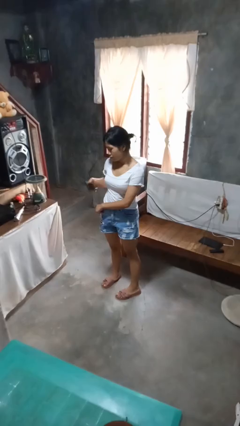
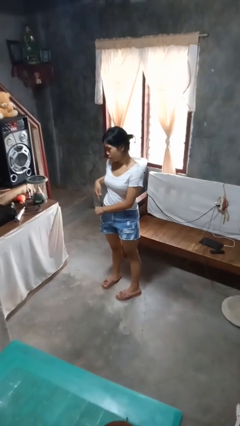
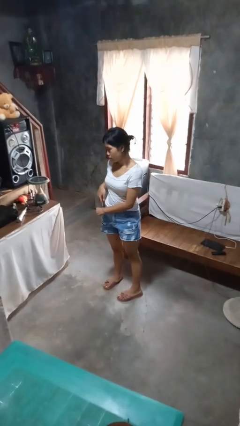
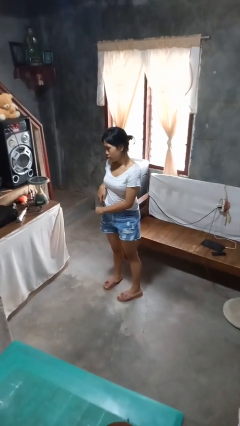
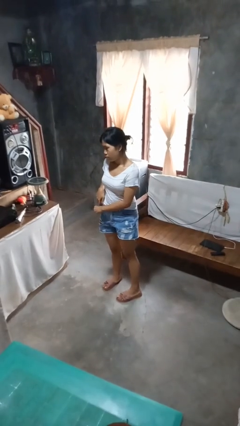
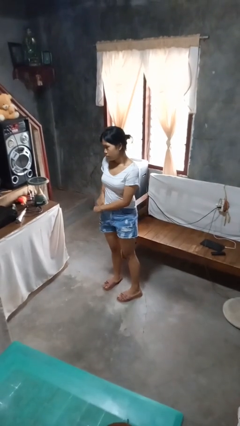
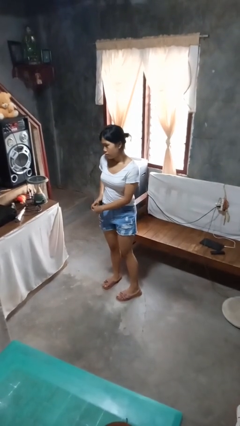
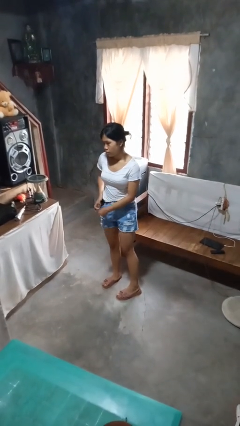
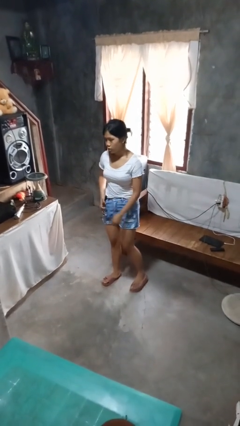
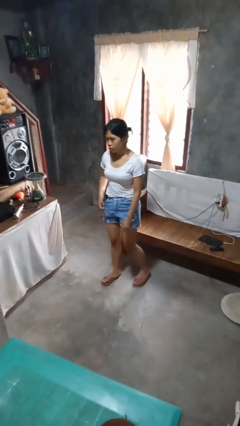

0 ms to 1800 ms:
person puts phone into pocket

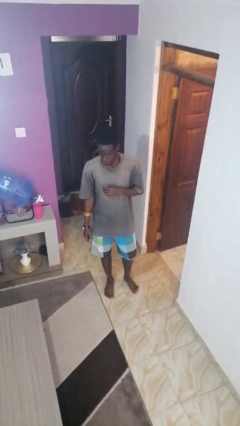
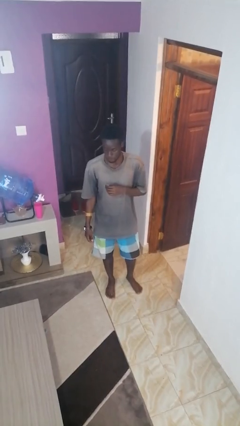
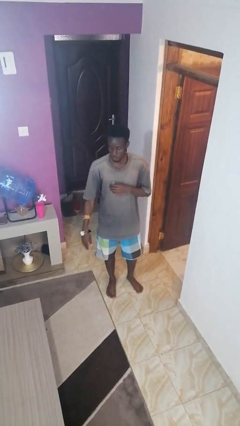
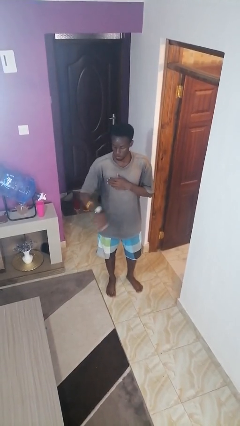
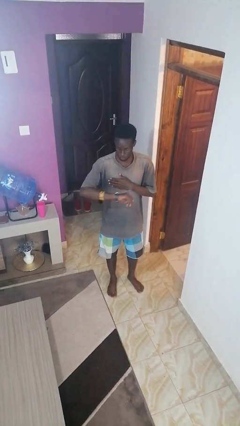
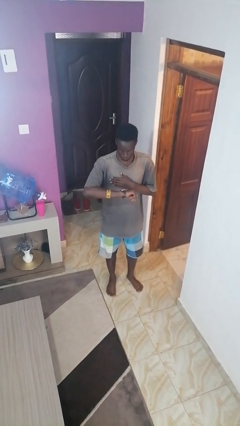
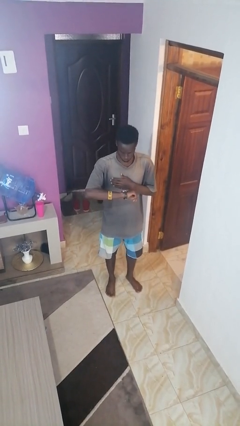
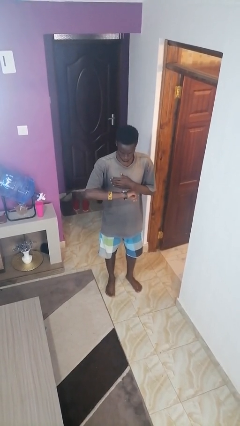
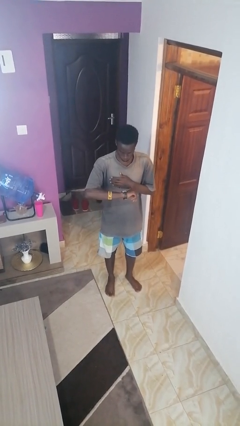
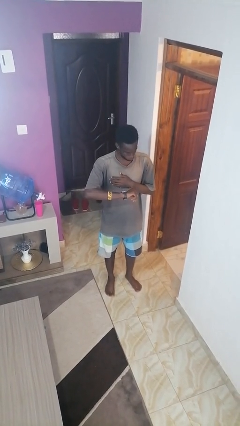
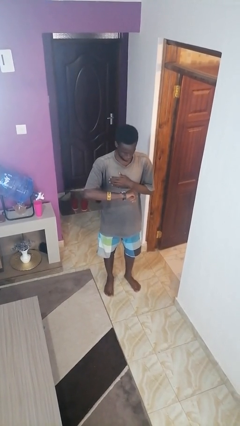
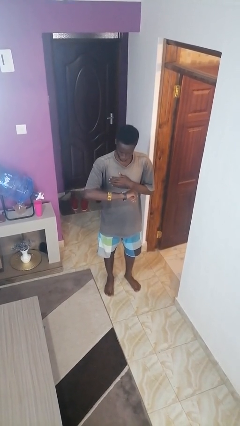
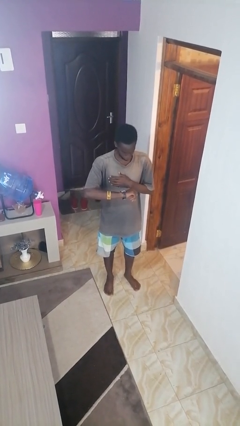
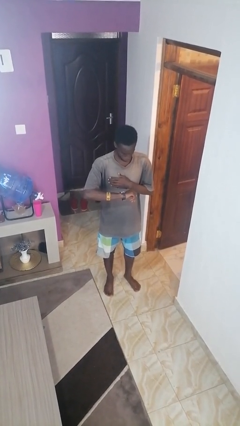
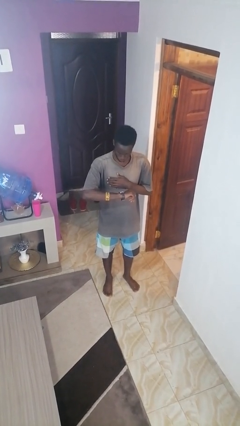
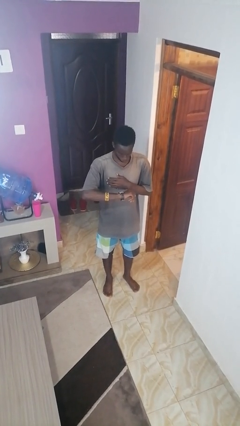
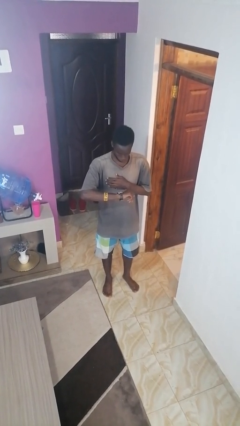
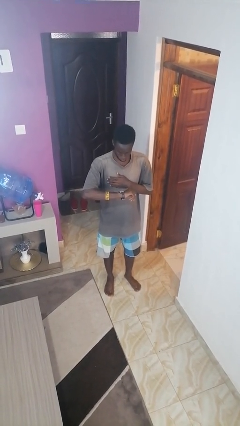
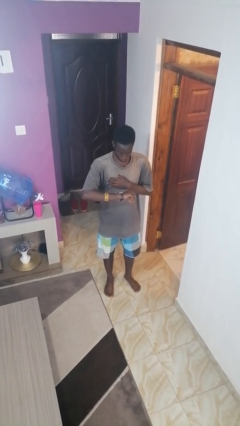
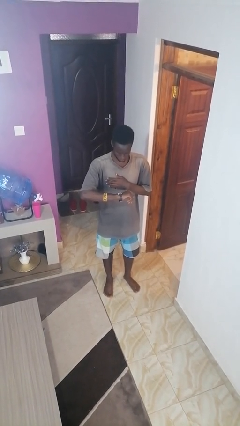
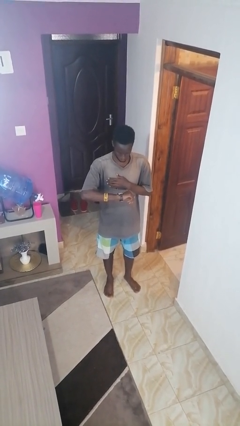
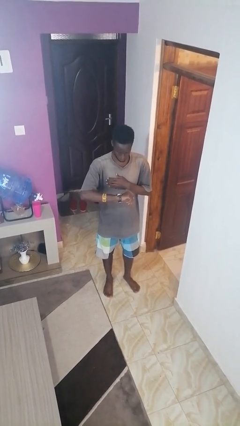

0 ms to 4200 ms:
person looks at wristwatch

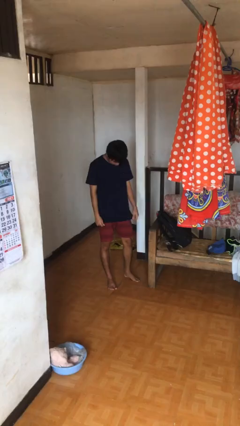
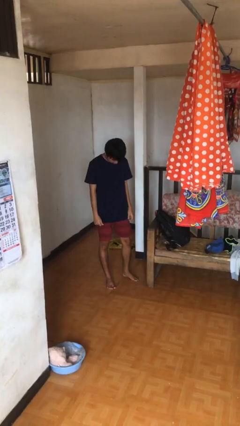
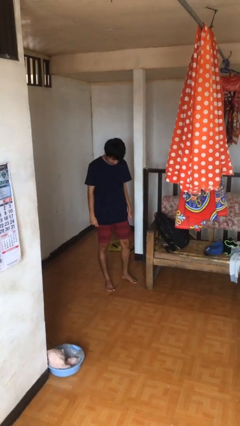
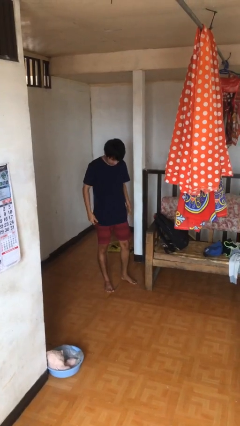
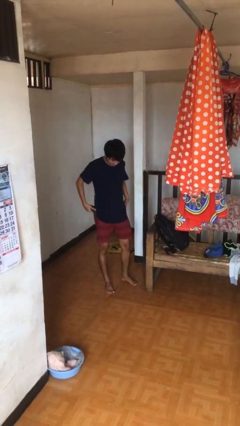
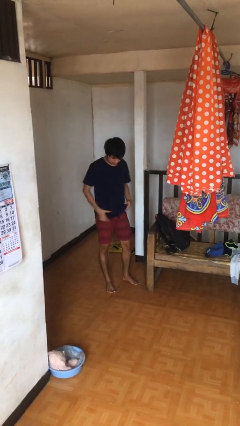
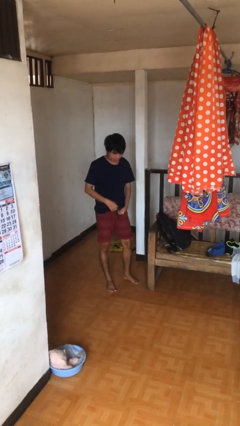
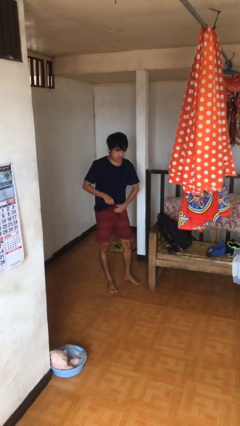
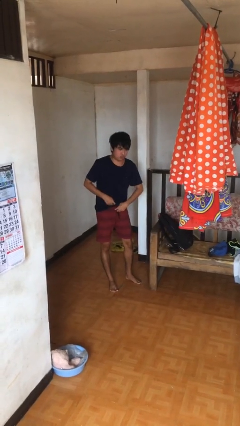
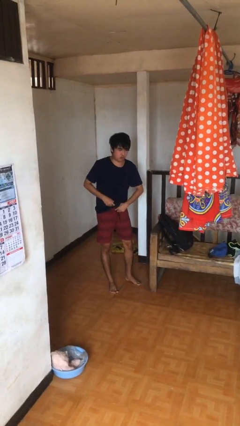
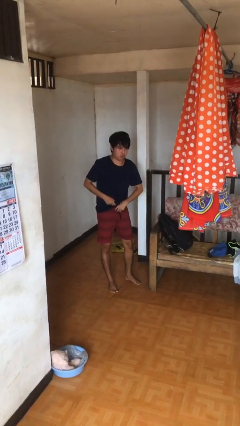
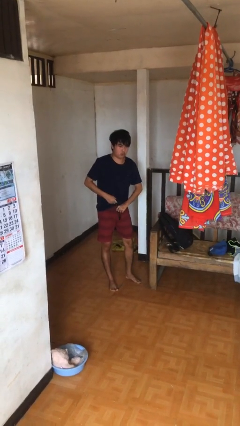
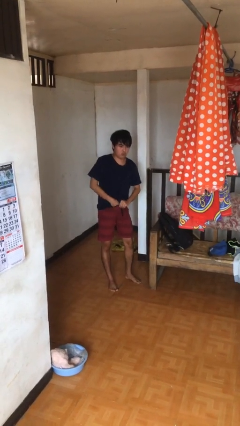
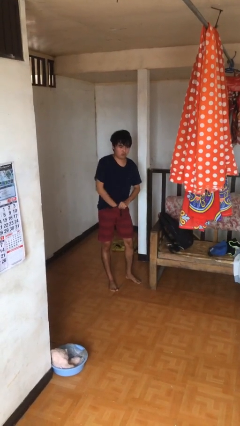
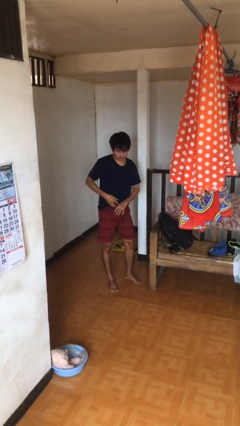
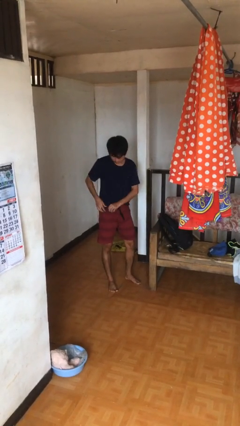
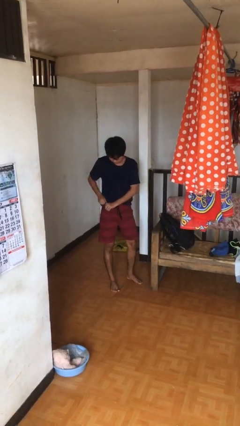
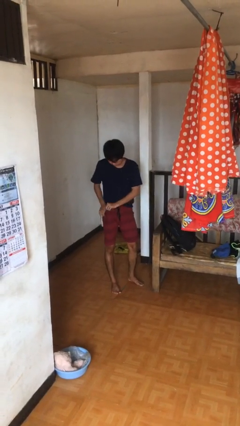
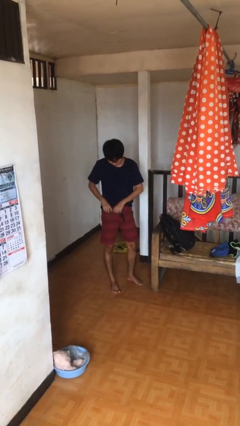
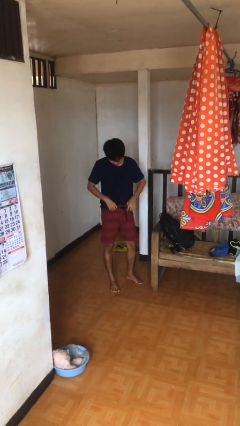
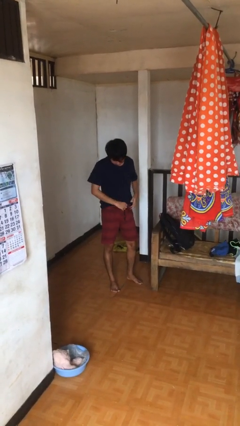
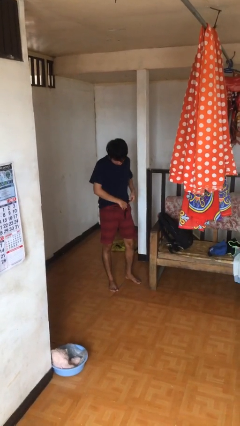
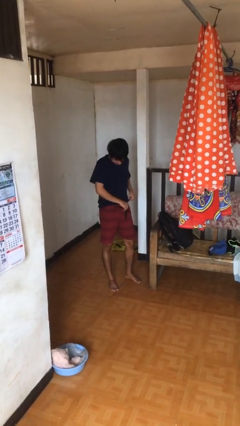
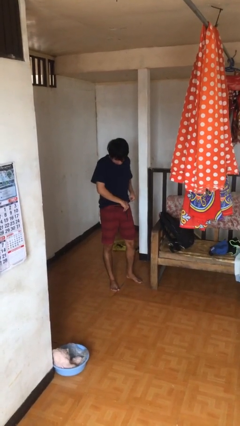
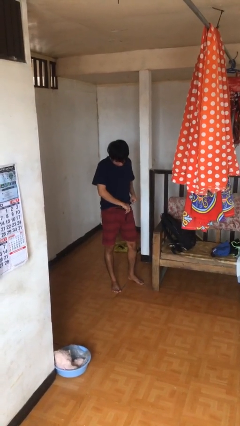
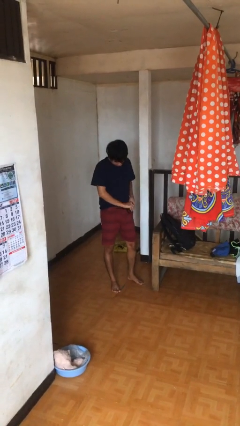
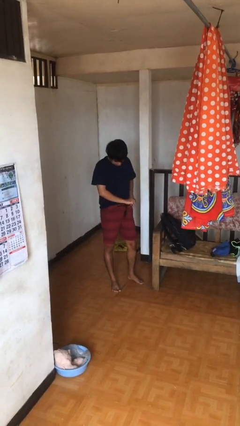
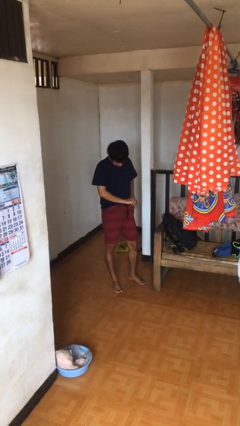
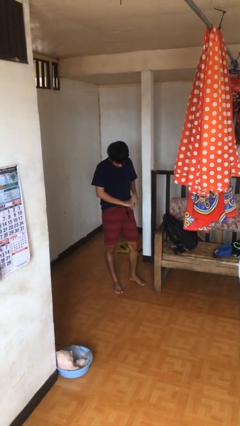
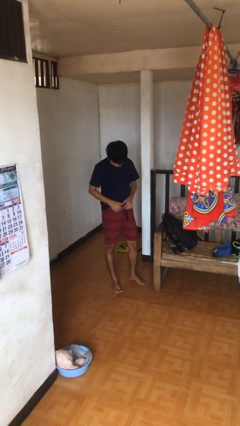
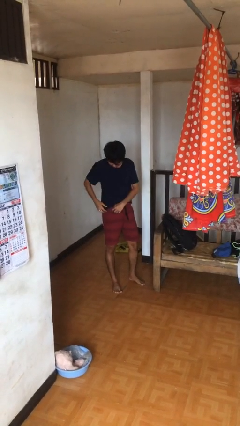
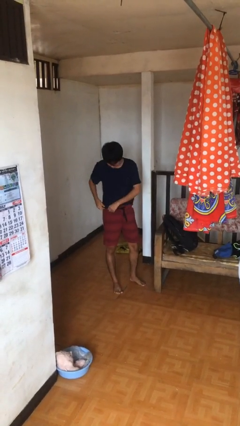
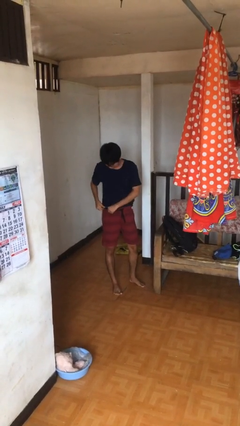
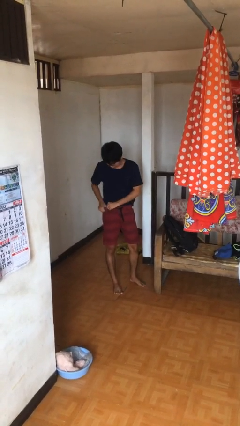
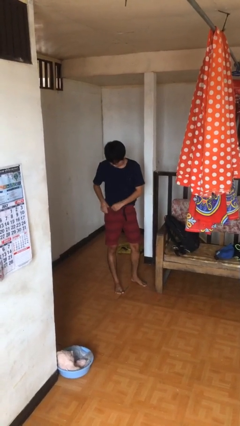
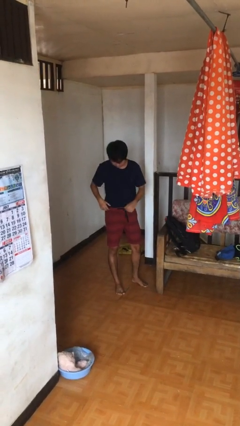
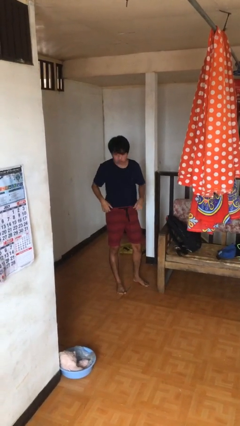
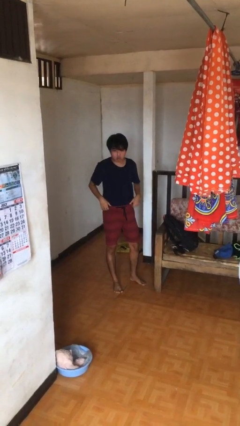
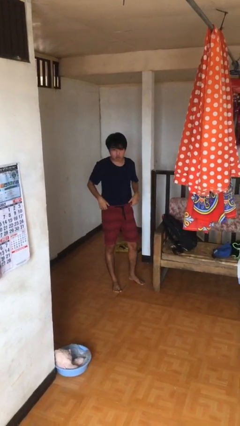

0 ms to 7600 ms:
person tucks in shirt

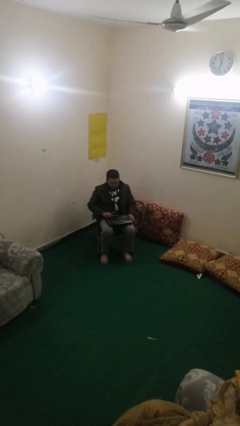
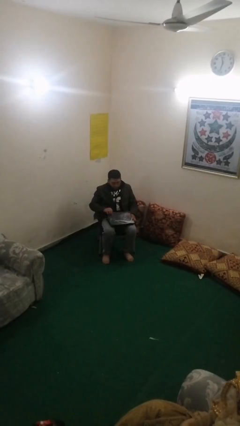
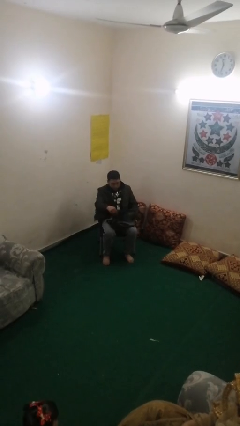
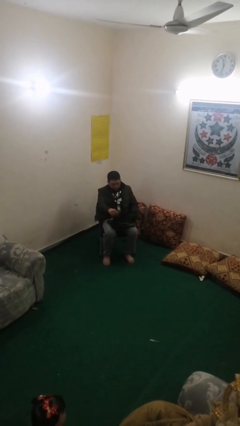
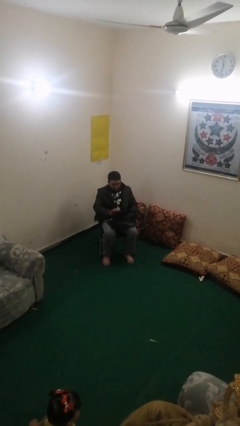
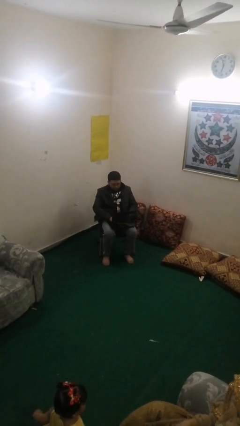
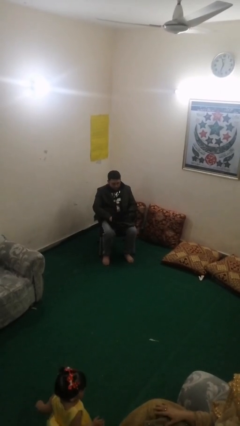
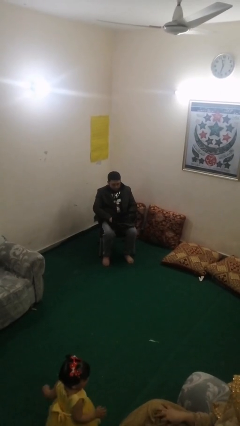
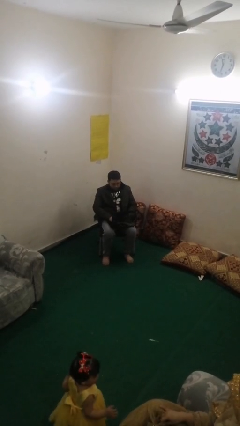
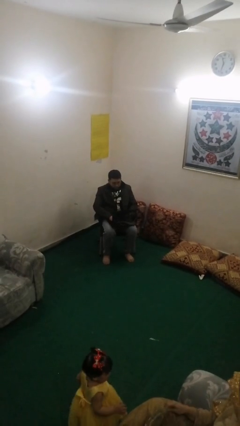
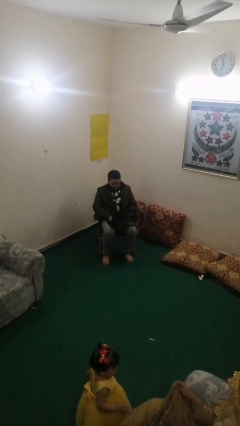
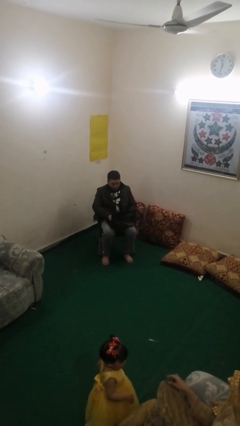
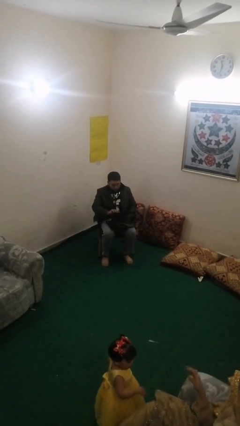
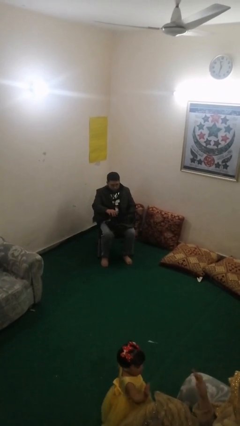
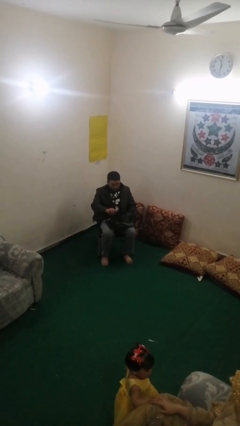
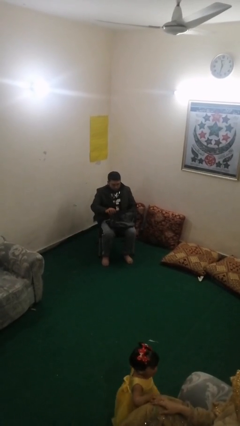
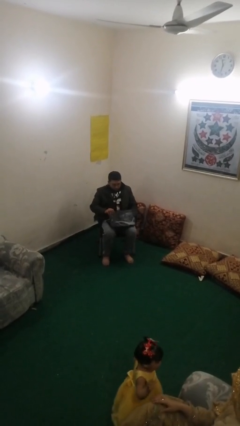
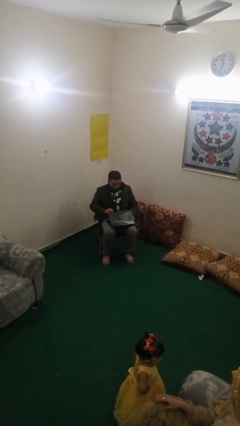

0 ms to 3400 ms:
person interacts with laptop

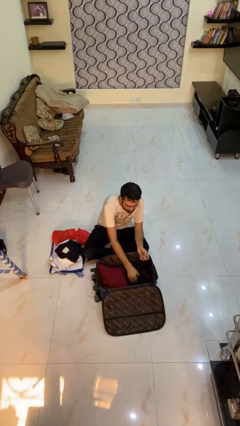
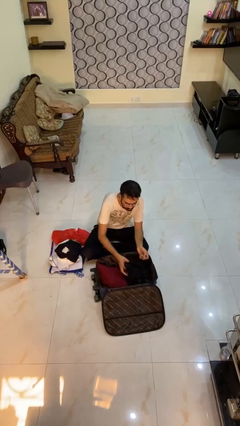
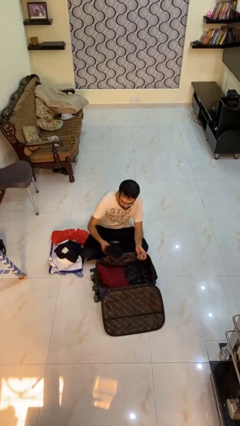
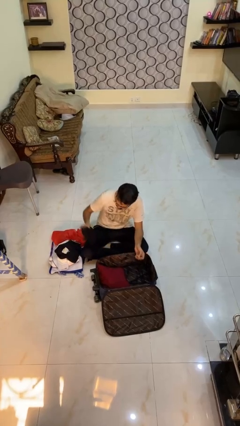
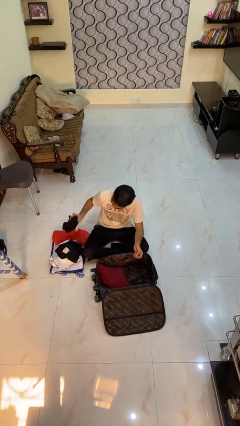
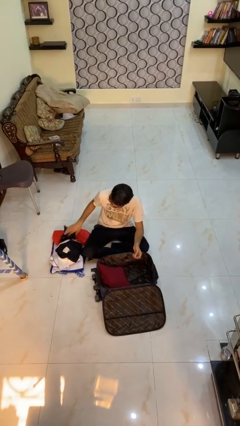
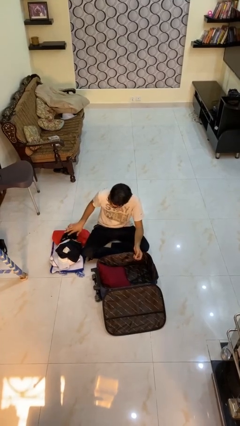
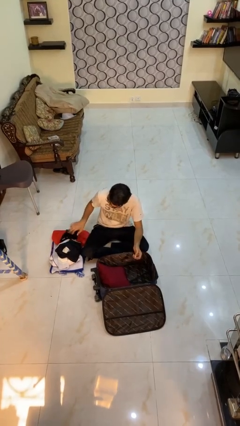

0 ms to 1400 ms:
person unloads clothes from suitcase
